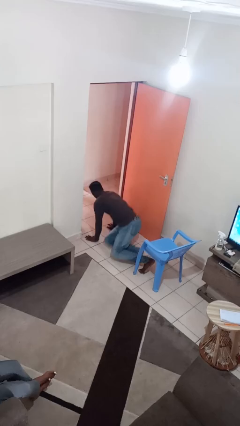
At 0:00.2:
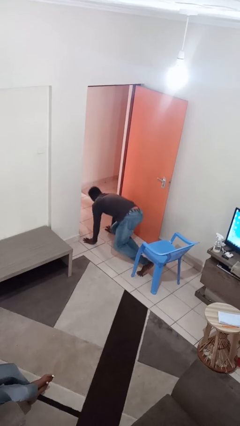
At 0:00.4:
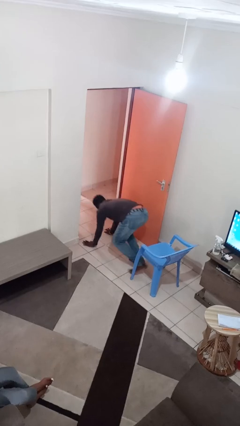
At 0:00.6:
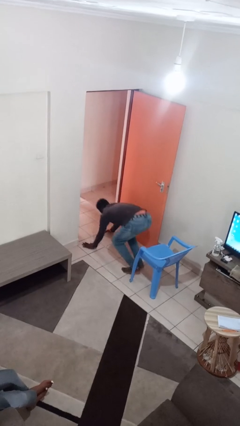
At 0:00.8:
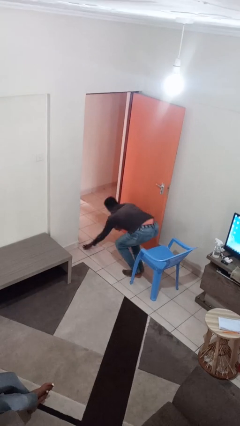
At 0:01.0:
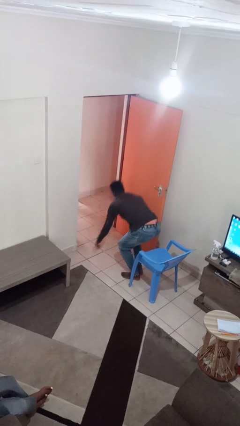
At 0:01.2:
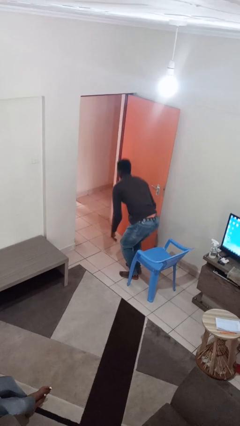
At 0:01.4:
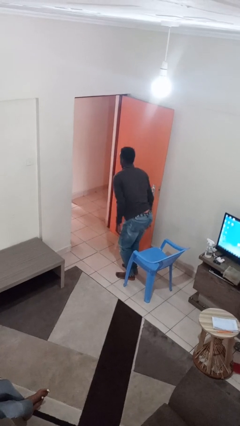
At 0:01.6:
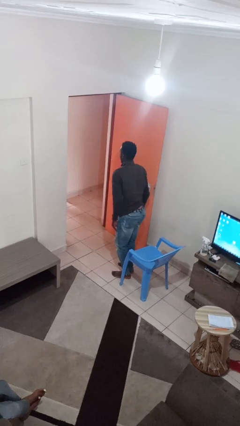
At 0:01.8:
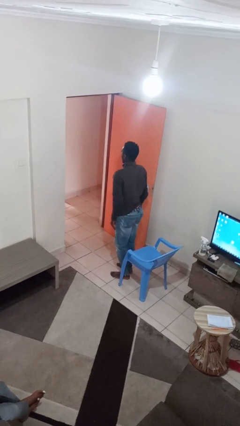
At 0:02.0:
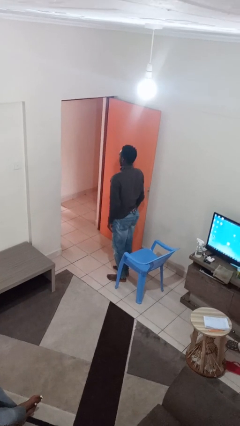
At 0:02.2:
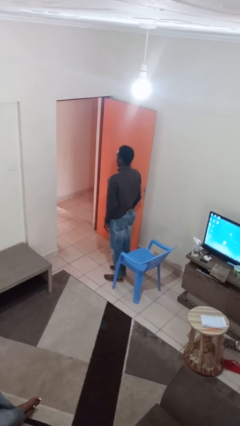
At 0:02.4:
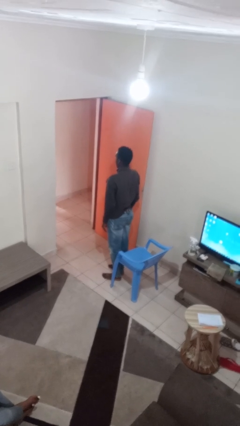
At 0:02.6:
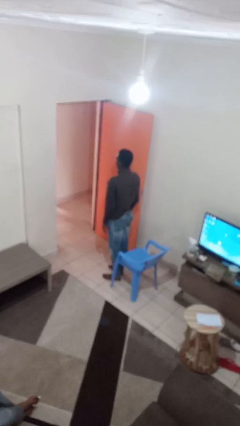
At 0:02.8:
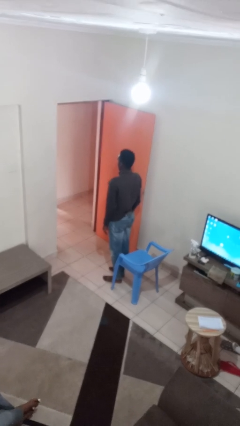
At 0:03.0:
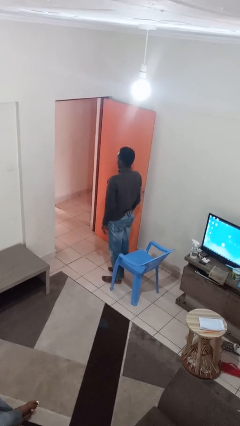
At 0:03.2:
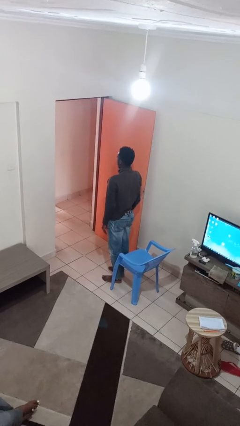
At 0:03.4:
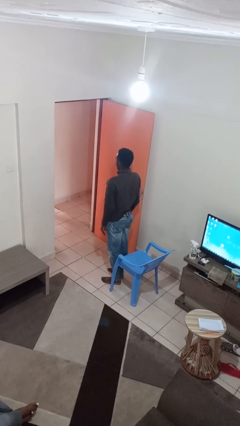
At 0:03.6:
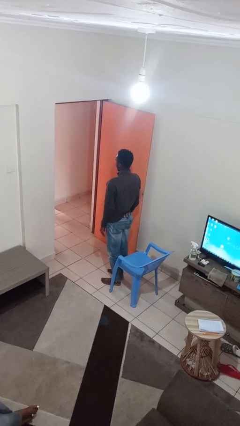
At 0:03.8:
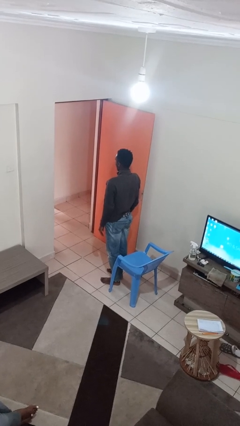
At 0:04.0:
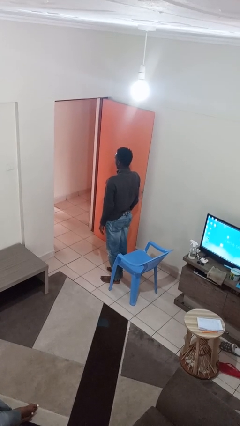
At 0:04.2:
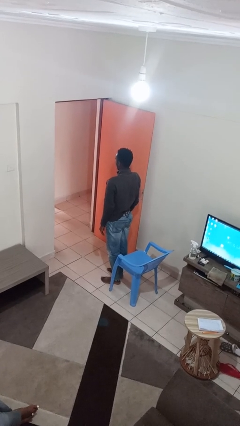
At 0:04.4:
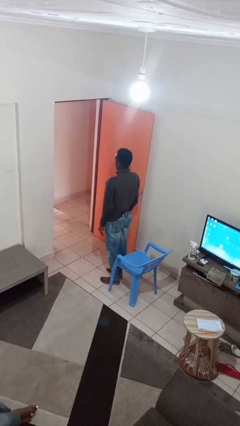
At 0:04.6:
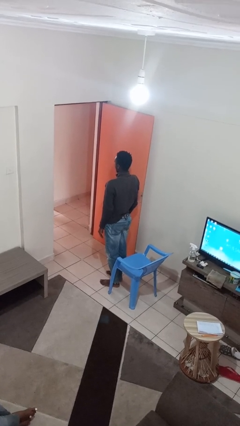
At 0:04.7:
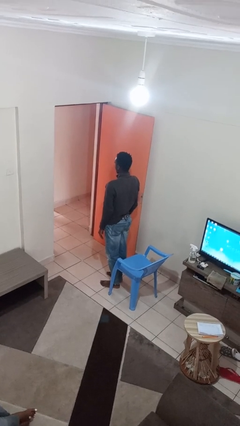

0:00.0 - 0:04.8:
person stands up from floor

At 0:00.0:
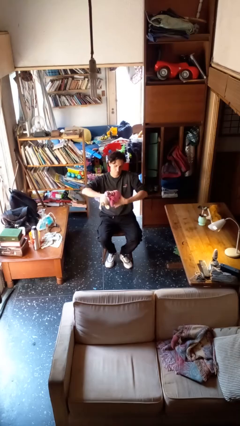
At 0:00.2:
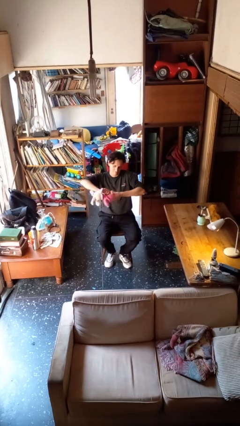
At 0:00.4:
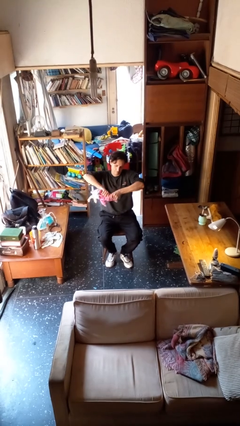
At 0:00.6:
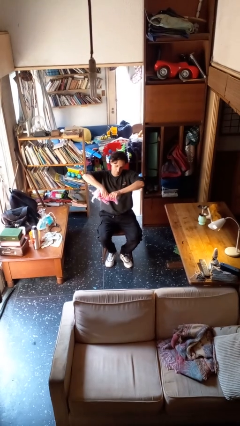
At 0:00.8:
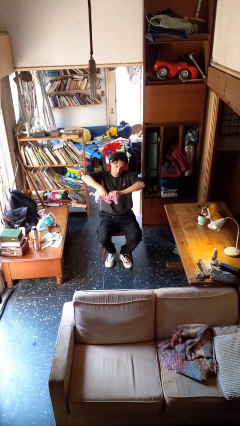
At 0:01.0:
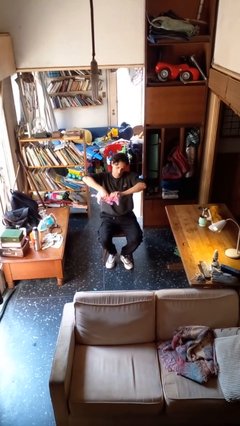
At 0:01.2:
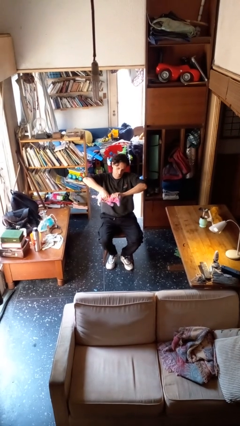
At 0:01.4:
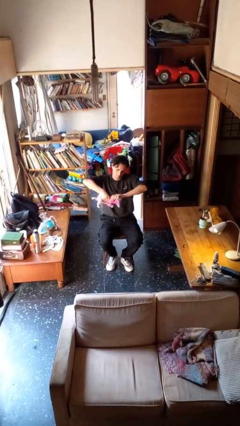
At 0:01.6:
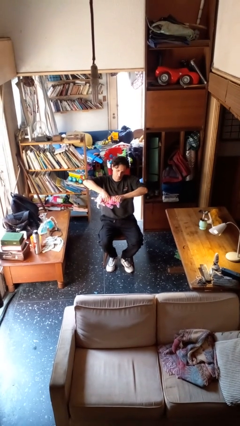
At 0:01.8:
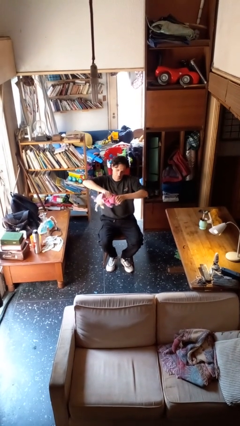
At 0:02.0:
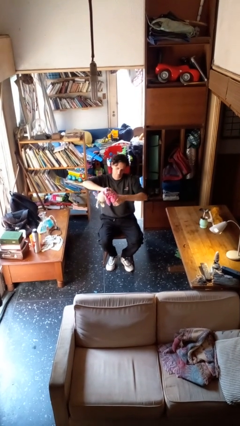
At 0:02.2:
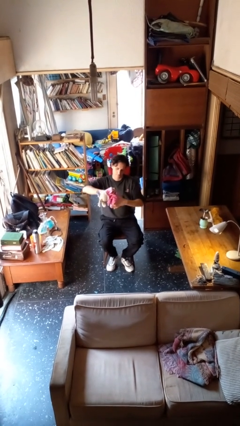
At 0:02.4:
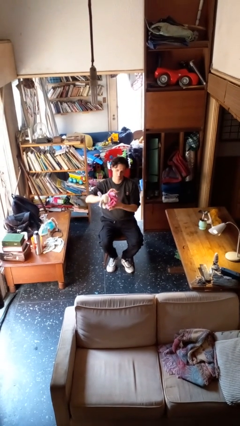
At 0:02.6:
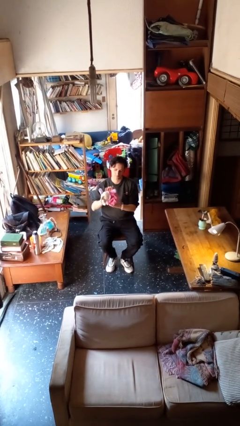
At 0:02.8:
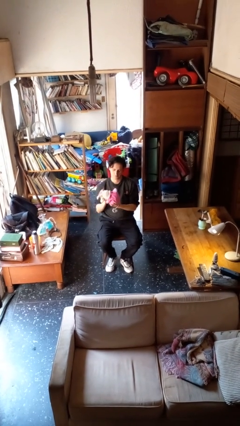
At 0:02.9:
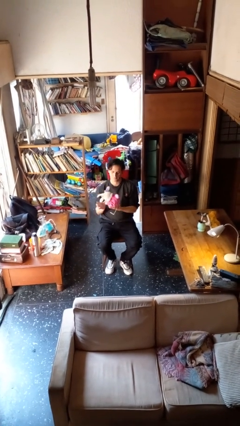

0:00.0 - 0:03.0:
person squeezes object

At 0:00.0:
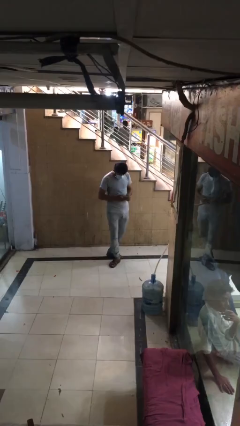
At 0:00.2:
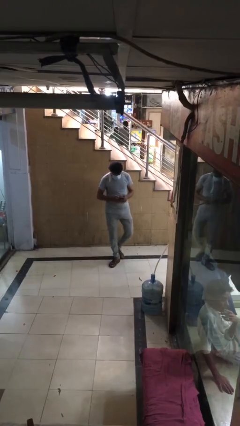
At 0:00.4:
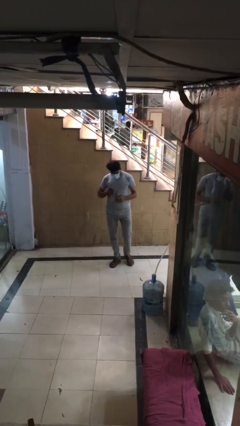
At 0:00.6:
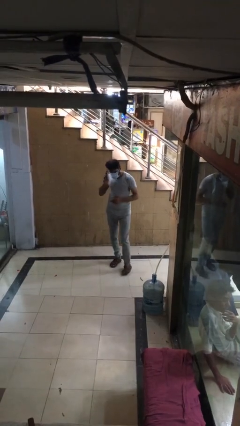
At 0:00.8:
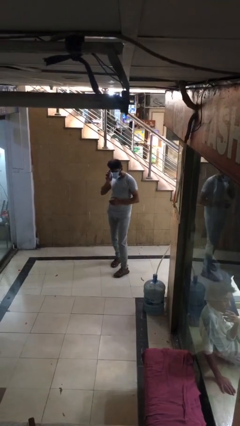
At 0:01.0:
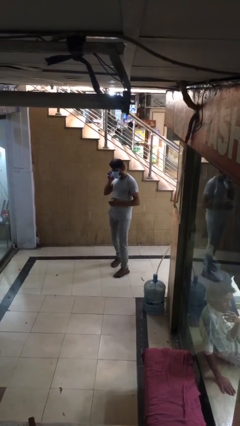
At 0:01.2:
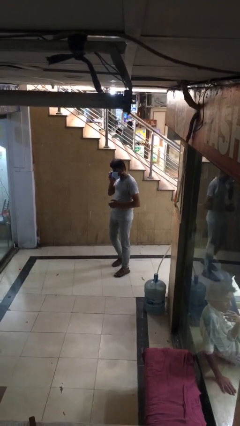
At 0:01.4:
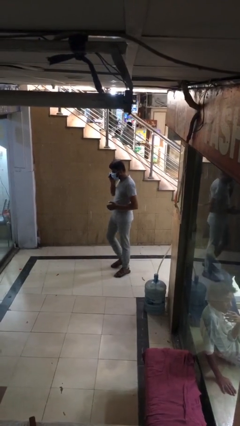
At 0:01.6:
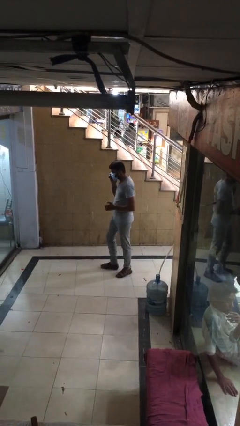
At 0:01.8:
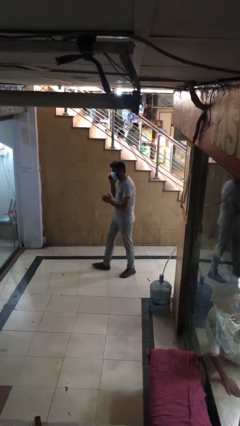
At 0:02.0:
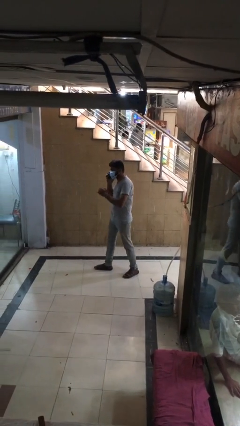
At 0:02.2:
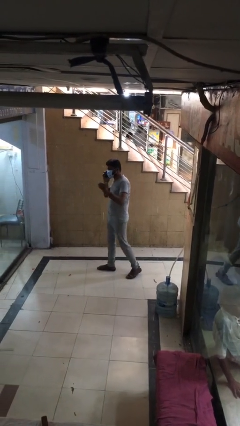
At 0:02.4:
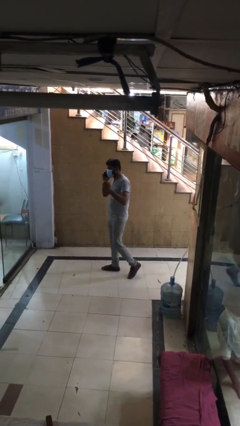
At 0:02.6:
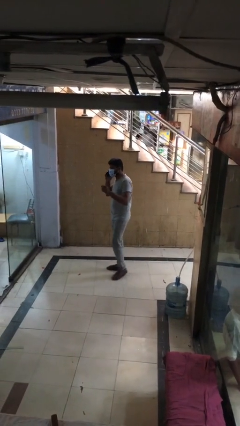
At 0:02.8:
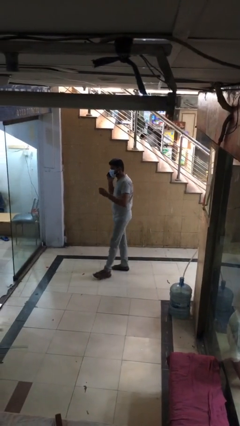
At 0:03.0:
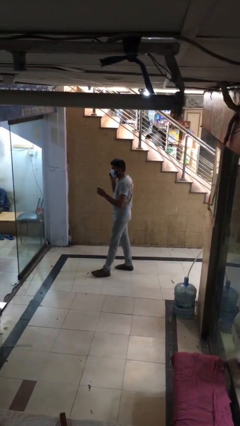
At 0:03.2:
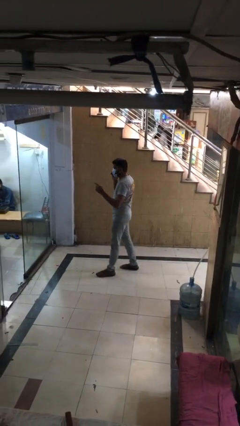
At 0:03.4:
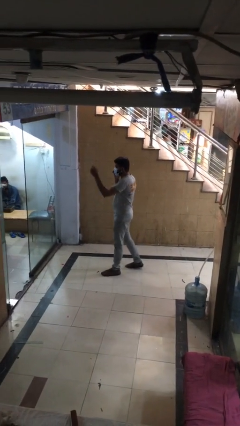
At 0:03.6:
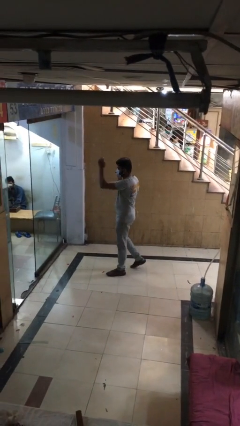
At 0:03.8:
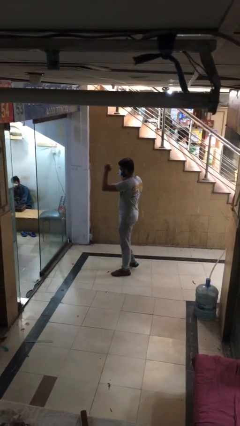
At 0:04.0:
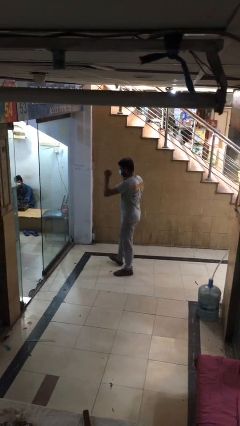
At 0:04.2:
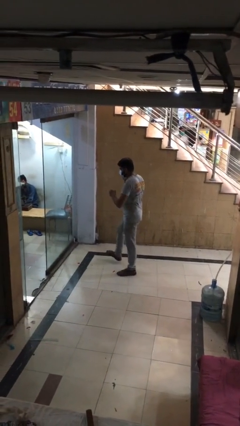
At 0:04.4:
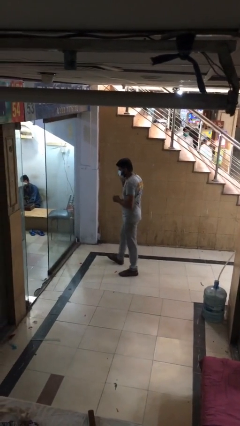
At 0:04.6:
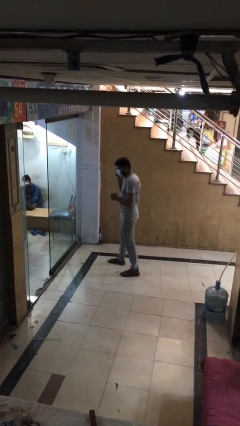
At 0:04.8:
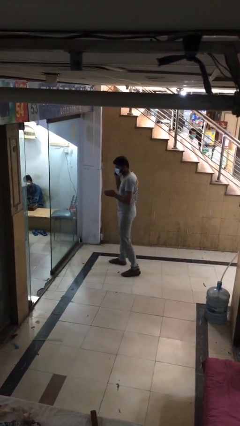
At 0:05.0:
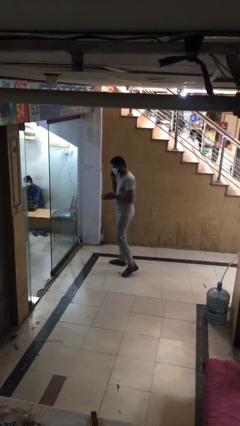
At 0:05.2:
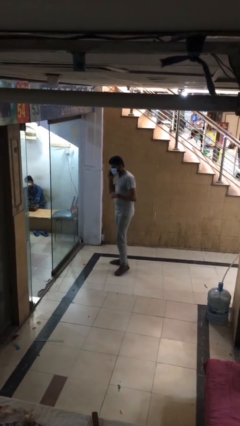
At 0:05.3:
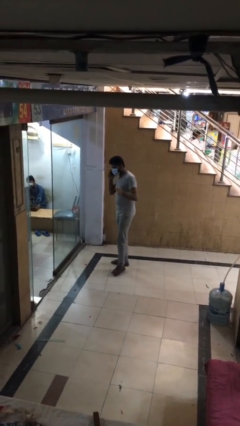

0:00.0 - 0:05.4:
person talks on phone

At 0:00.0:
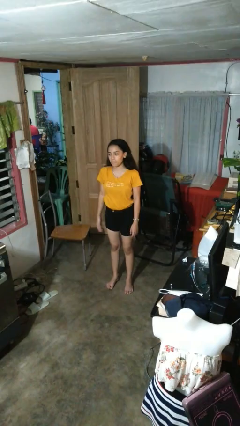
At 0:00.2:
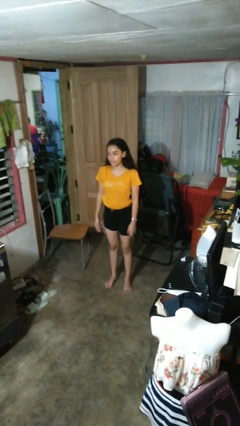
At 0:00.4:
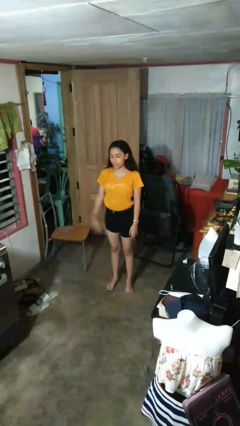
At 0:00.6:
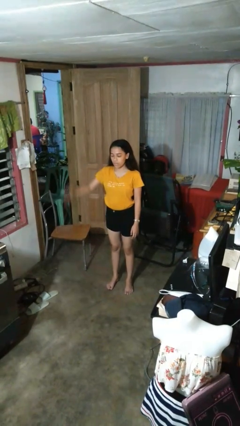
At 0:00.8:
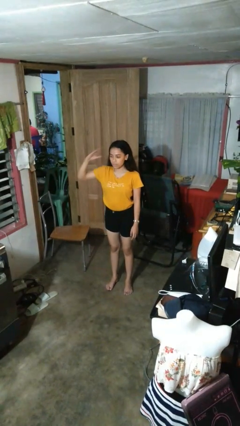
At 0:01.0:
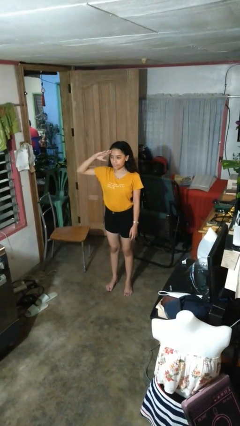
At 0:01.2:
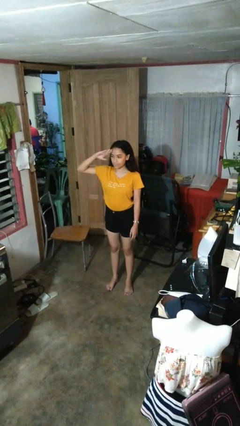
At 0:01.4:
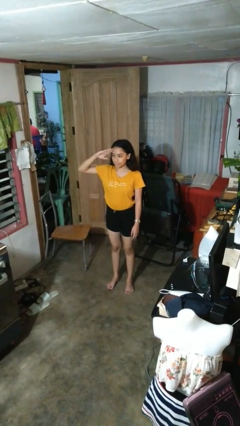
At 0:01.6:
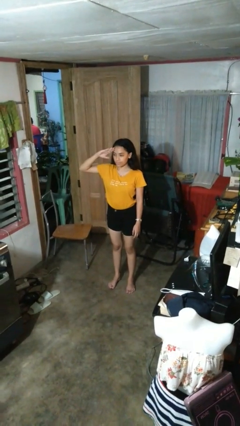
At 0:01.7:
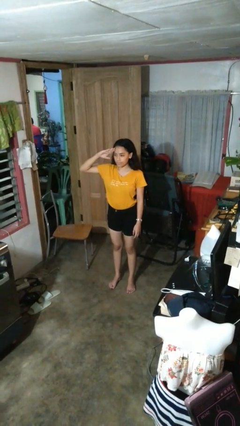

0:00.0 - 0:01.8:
person salutes

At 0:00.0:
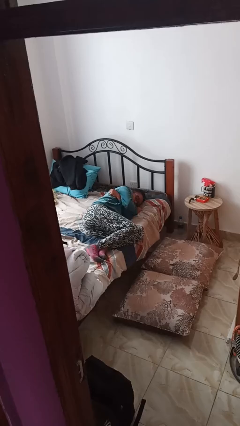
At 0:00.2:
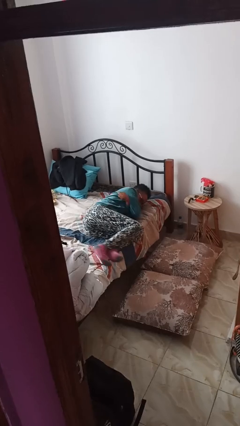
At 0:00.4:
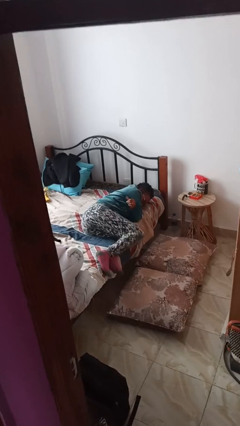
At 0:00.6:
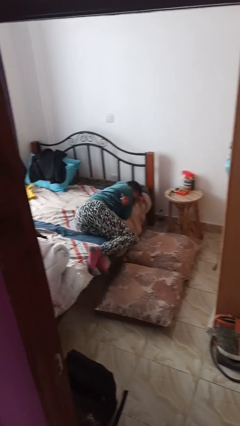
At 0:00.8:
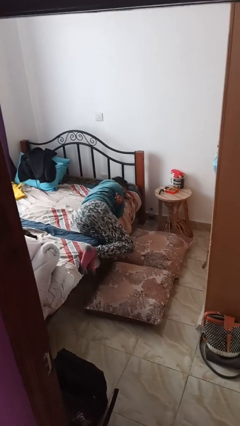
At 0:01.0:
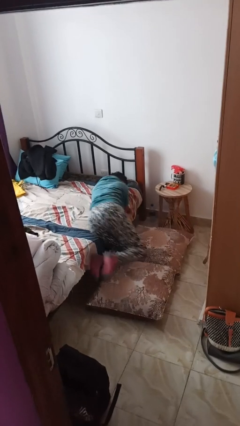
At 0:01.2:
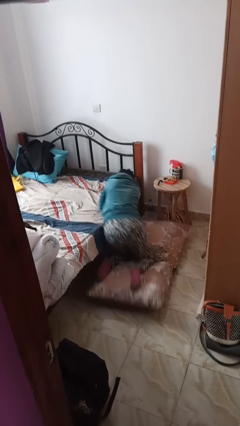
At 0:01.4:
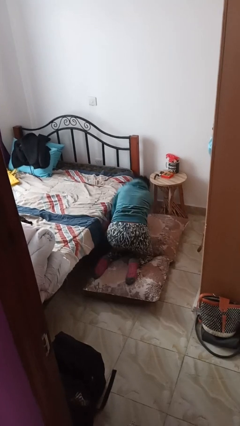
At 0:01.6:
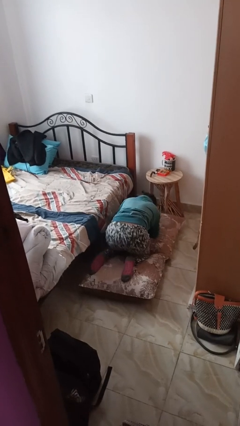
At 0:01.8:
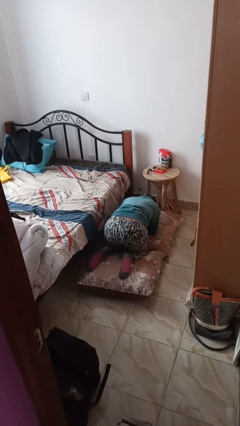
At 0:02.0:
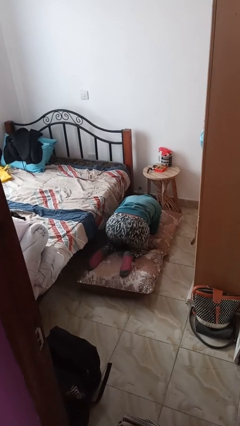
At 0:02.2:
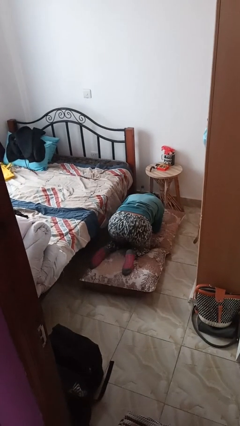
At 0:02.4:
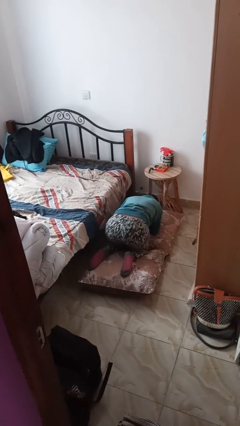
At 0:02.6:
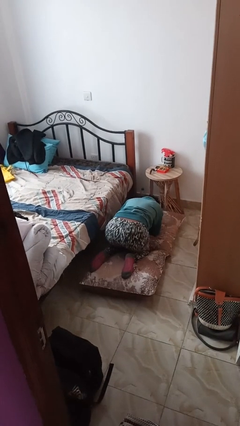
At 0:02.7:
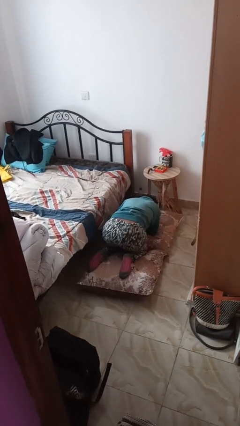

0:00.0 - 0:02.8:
person falls from bed
